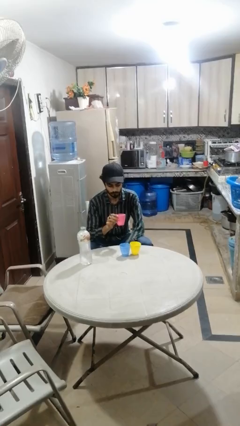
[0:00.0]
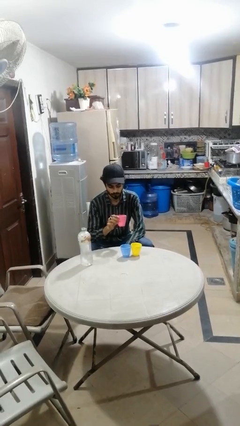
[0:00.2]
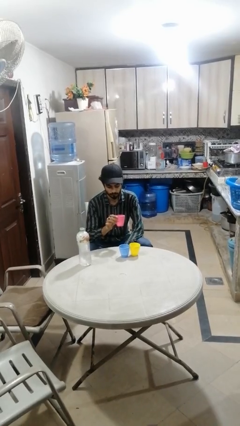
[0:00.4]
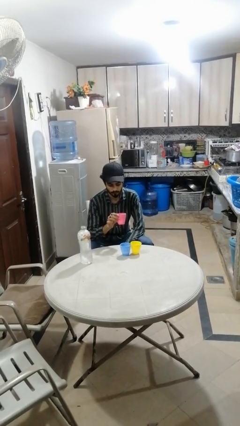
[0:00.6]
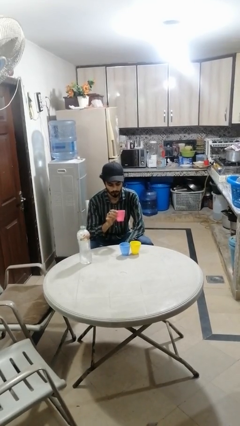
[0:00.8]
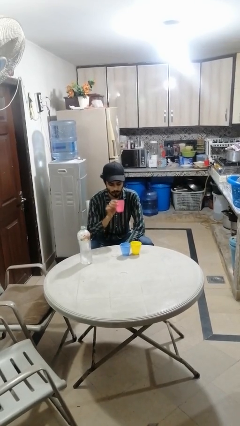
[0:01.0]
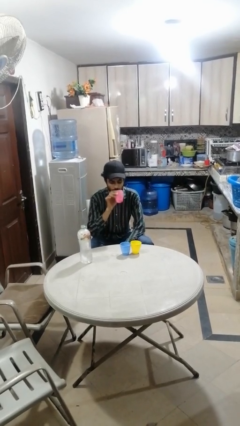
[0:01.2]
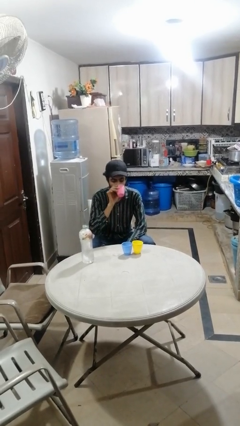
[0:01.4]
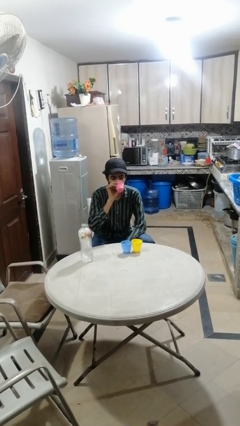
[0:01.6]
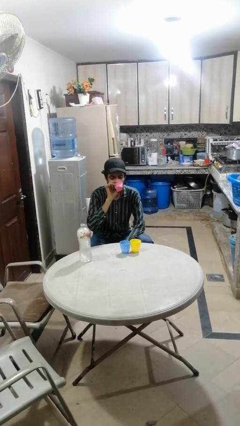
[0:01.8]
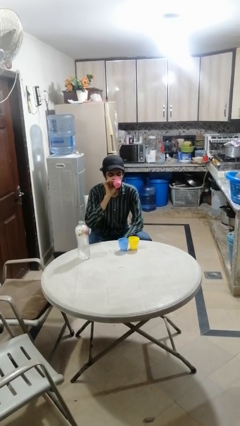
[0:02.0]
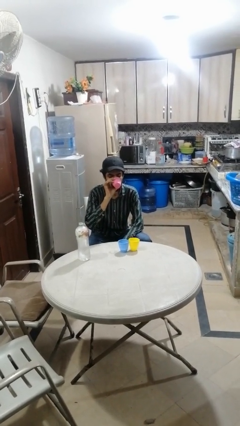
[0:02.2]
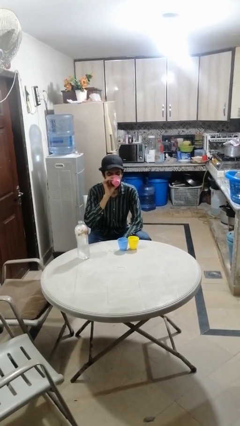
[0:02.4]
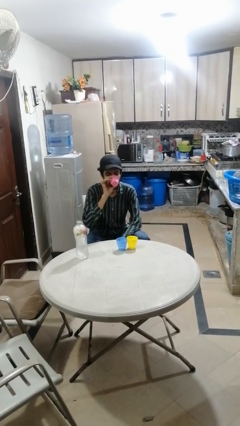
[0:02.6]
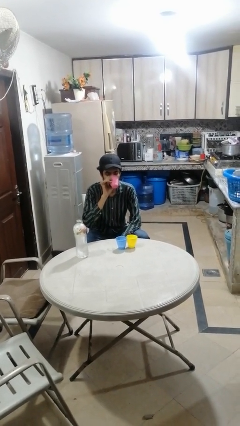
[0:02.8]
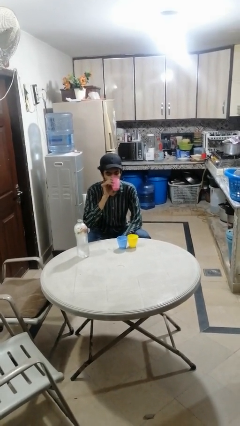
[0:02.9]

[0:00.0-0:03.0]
person drinks from shotglass

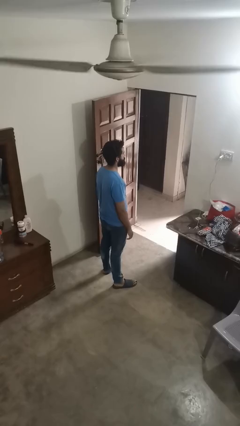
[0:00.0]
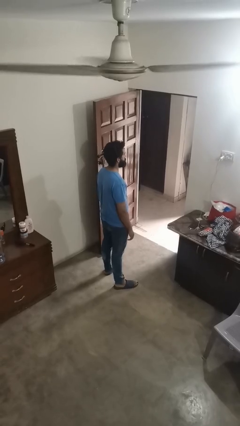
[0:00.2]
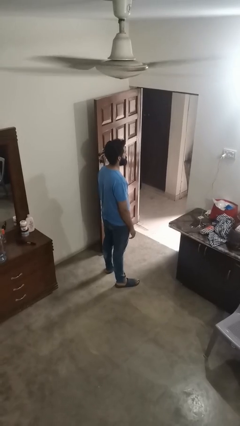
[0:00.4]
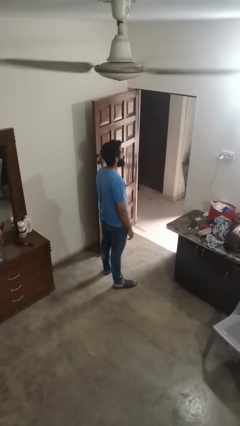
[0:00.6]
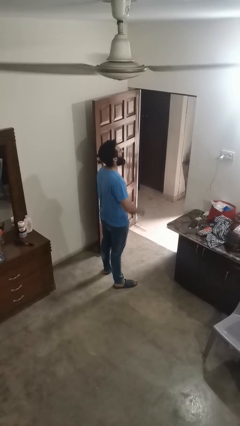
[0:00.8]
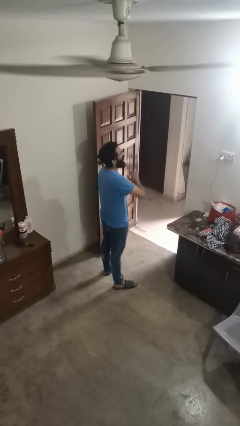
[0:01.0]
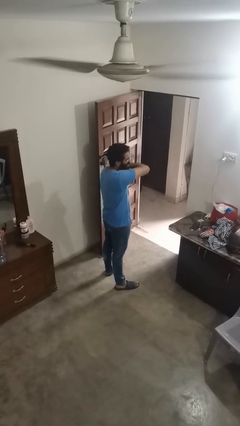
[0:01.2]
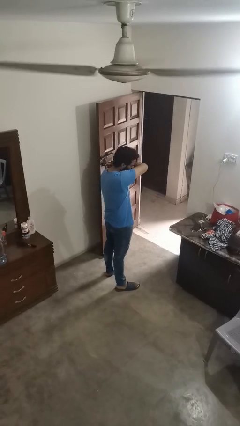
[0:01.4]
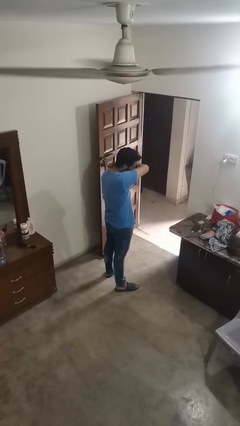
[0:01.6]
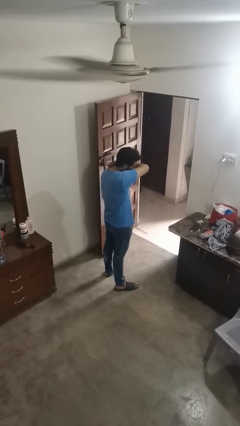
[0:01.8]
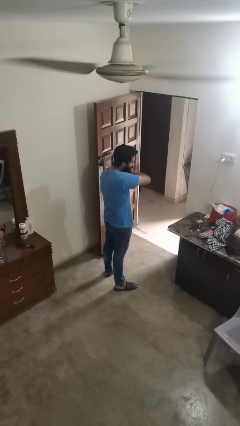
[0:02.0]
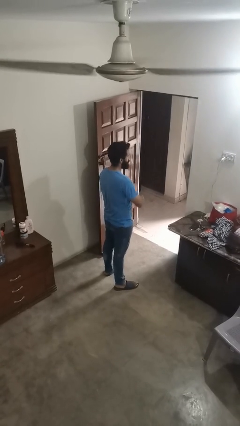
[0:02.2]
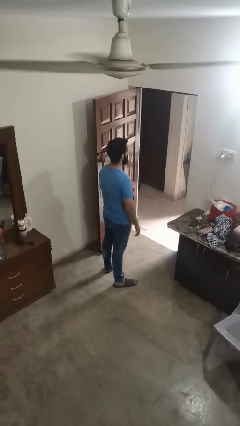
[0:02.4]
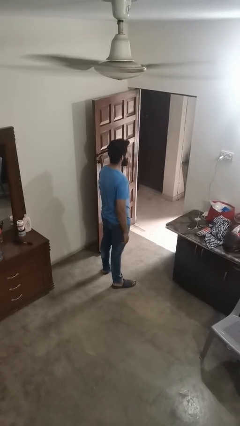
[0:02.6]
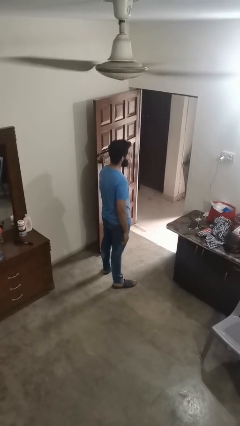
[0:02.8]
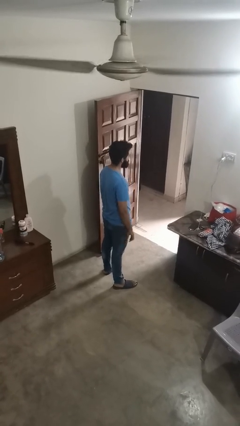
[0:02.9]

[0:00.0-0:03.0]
person sneezes into arm

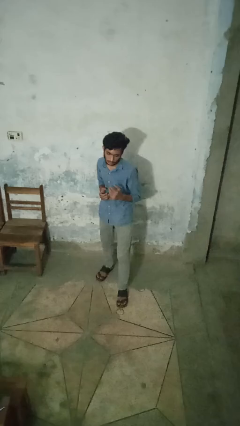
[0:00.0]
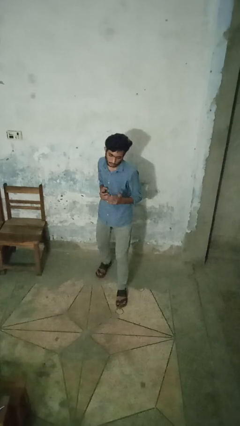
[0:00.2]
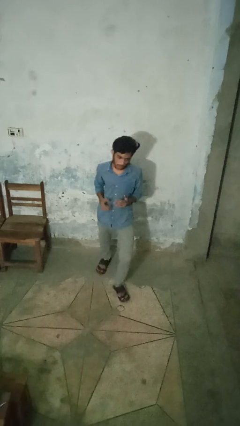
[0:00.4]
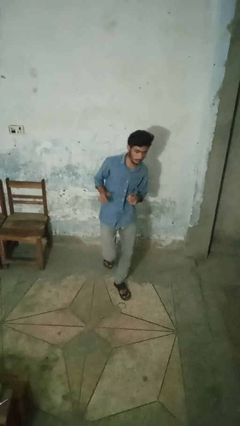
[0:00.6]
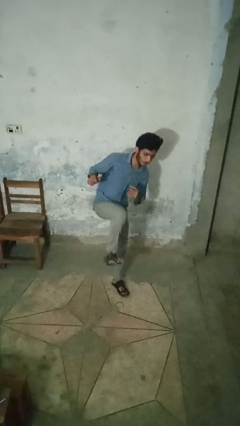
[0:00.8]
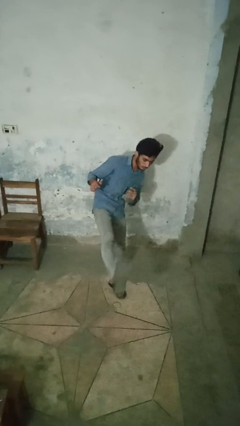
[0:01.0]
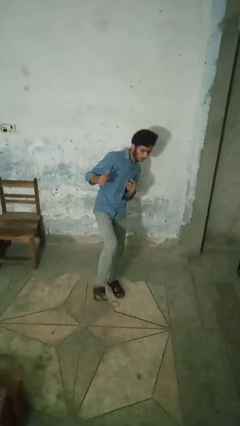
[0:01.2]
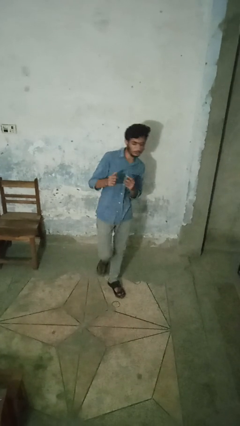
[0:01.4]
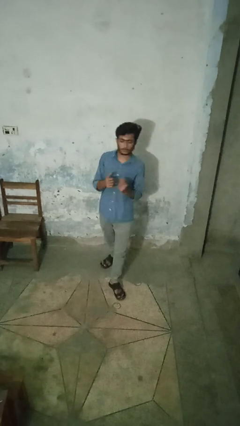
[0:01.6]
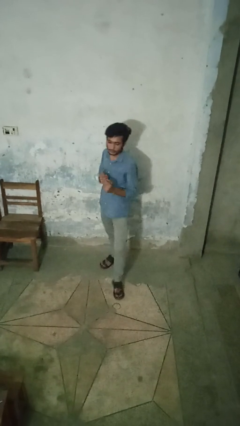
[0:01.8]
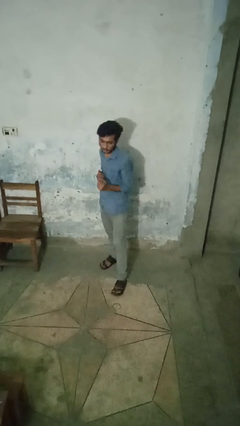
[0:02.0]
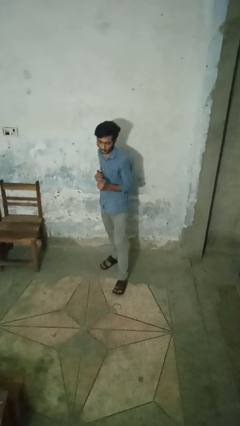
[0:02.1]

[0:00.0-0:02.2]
person karate kicks

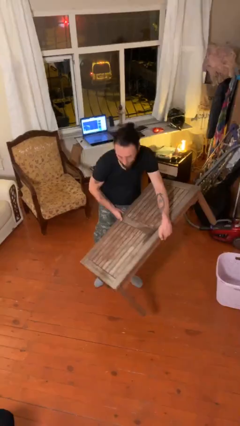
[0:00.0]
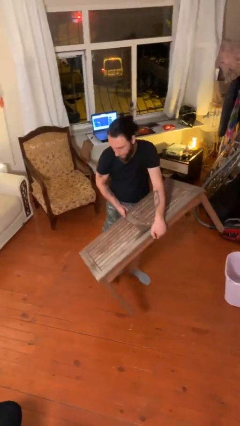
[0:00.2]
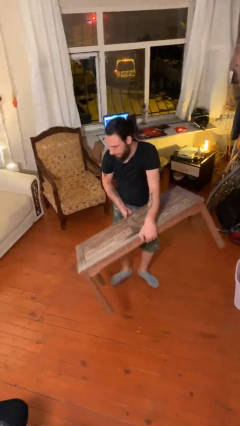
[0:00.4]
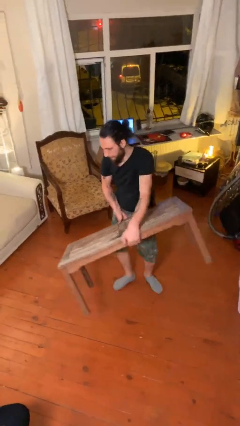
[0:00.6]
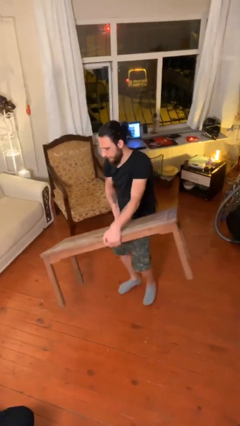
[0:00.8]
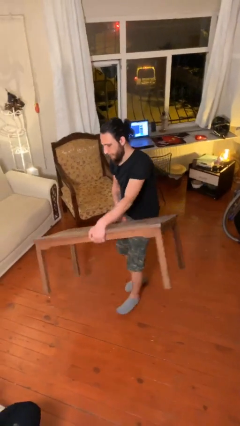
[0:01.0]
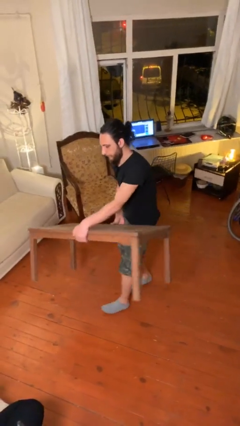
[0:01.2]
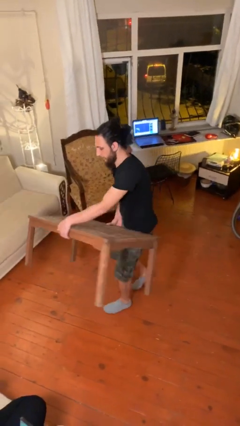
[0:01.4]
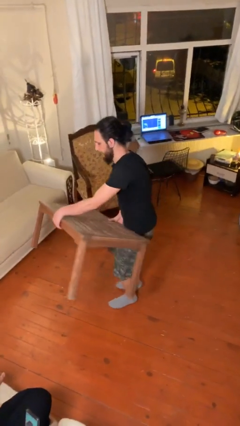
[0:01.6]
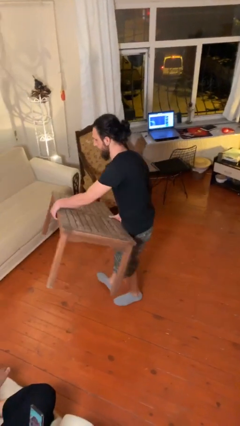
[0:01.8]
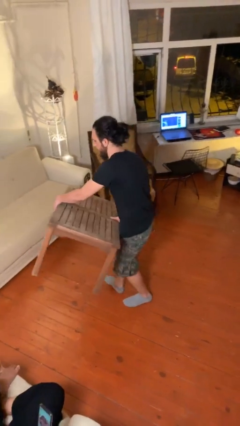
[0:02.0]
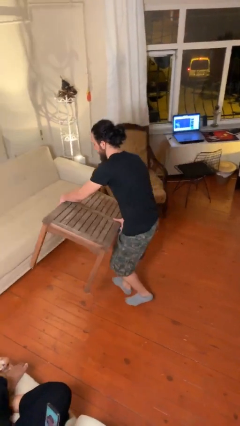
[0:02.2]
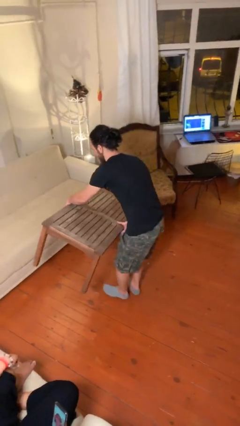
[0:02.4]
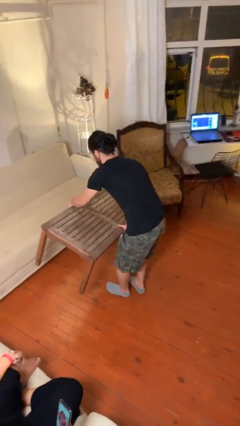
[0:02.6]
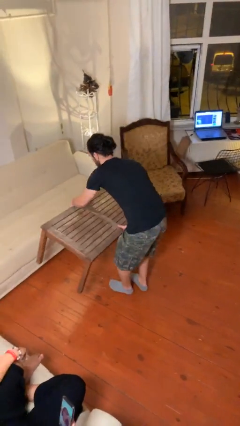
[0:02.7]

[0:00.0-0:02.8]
person carries heavy object

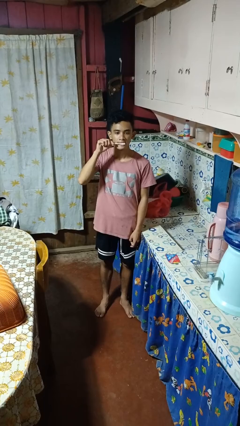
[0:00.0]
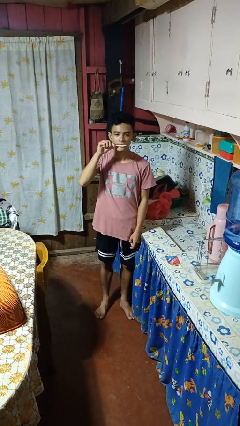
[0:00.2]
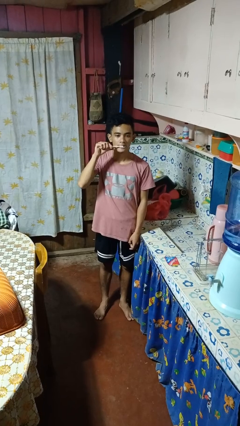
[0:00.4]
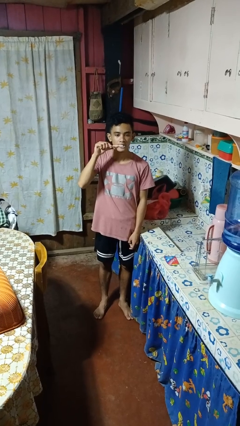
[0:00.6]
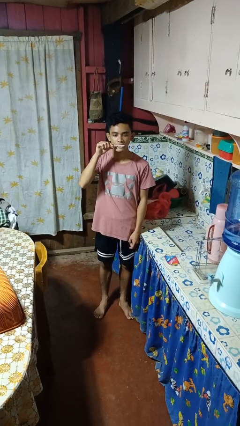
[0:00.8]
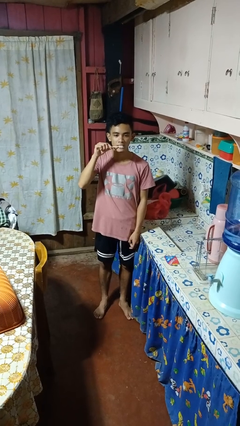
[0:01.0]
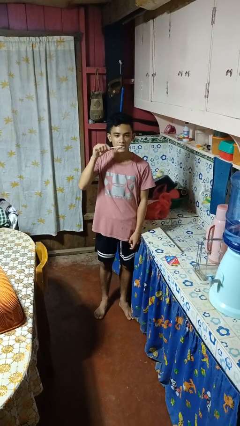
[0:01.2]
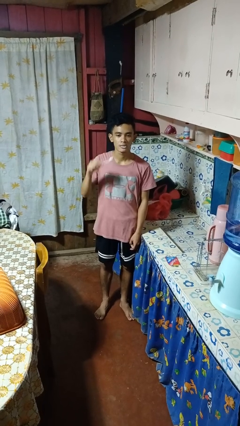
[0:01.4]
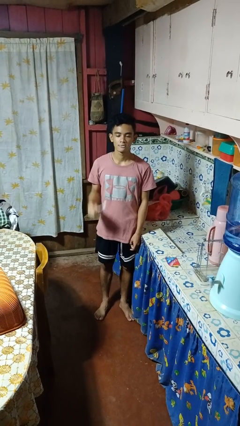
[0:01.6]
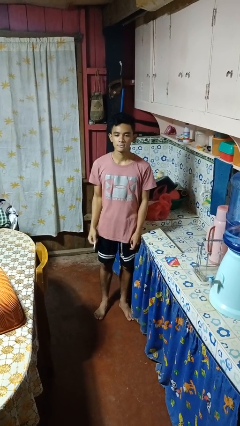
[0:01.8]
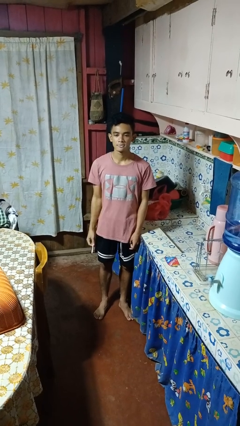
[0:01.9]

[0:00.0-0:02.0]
person brushes teeth

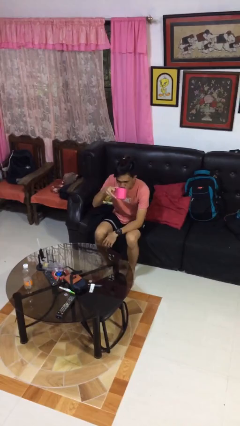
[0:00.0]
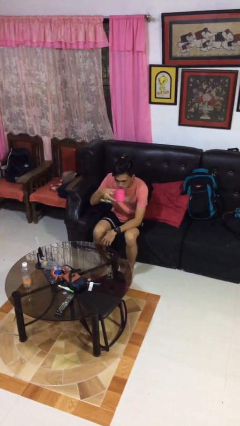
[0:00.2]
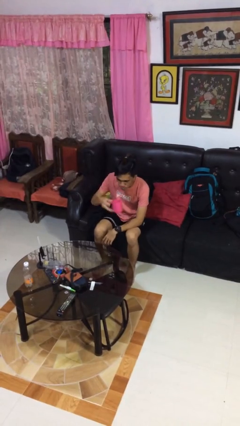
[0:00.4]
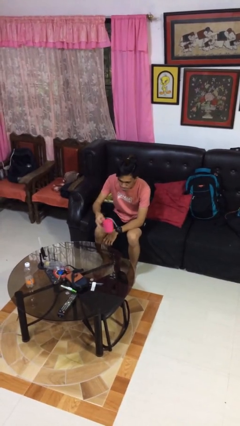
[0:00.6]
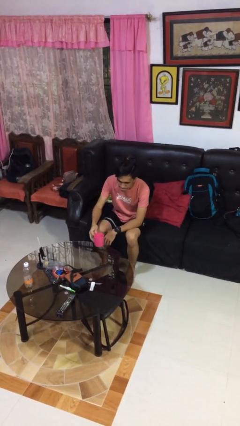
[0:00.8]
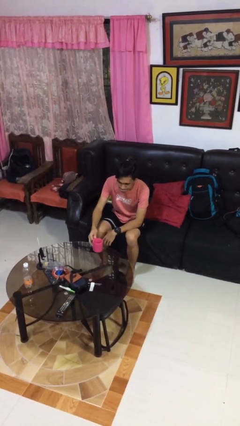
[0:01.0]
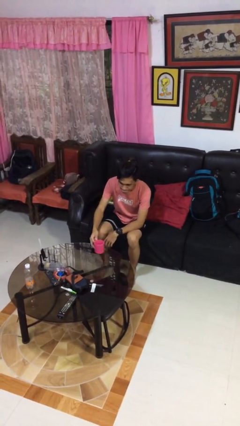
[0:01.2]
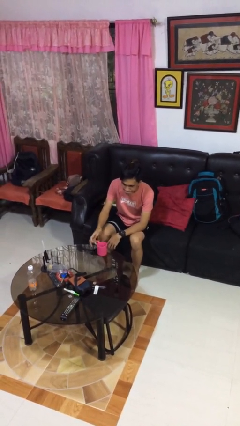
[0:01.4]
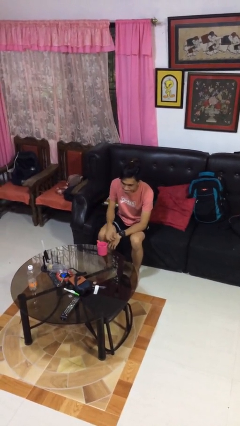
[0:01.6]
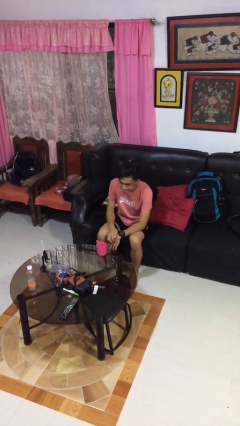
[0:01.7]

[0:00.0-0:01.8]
person puts down object on table

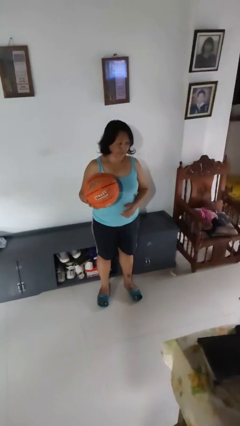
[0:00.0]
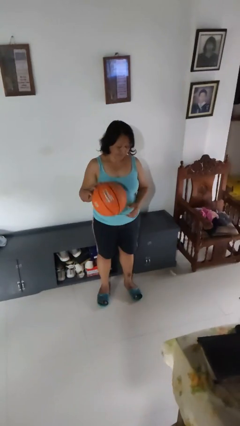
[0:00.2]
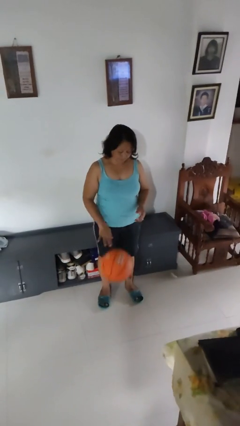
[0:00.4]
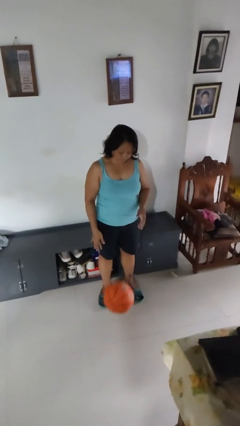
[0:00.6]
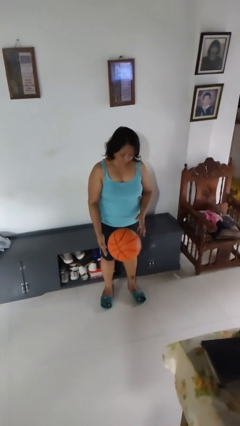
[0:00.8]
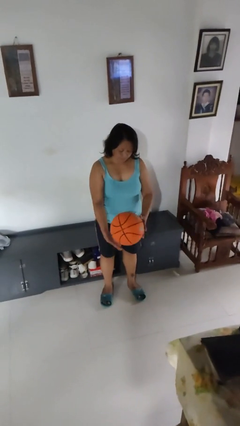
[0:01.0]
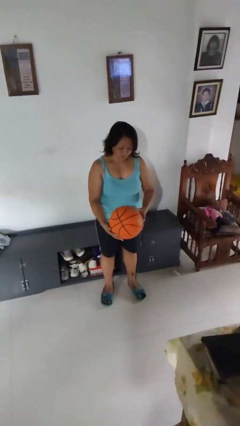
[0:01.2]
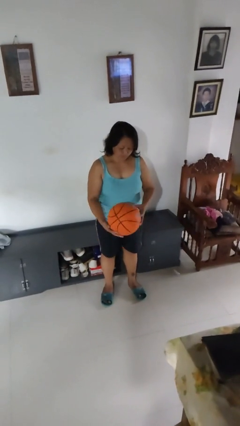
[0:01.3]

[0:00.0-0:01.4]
person bounces ball on floor

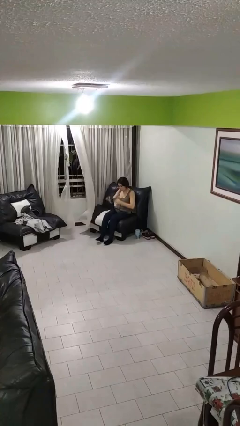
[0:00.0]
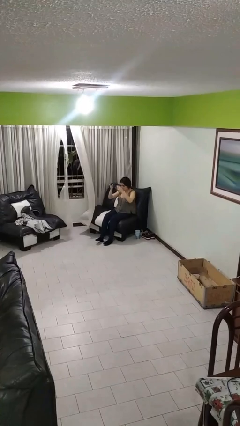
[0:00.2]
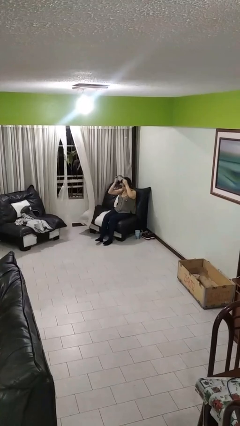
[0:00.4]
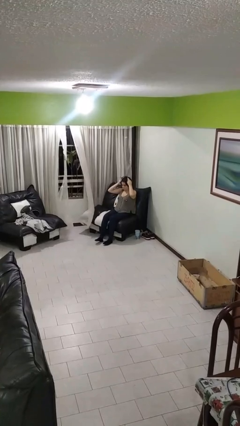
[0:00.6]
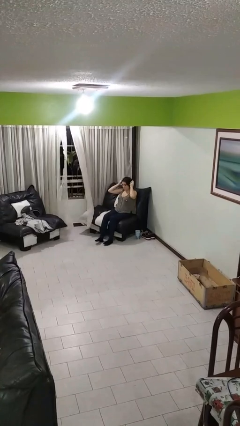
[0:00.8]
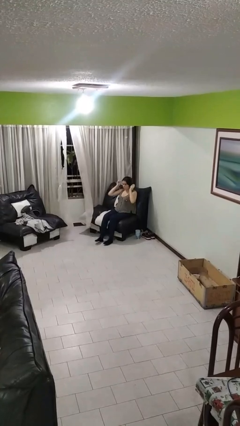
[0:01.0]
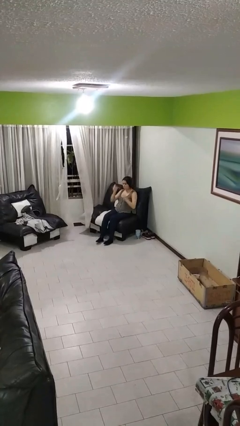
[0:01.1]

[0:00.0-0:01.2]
person puts on headphones
